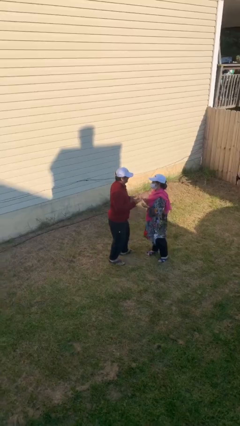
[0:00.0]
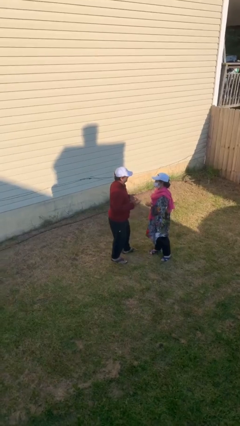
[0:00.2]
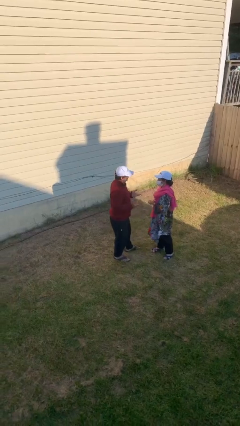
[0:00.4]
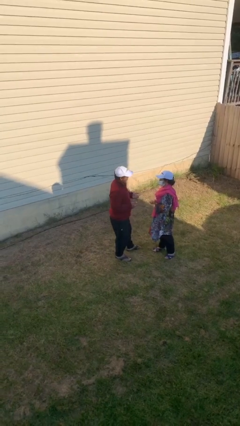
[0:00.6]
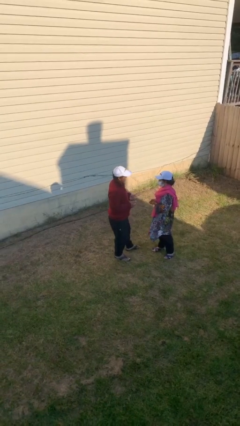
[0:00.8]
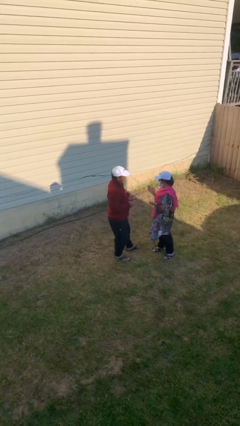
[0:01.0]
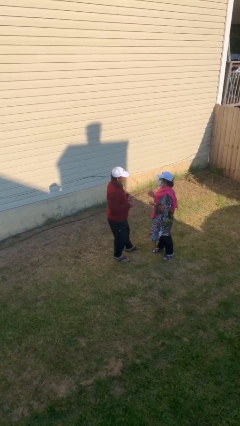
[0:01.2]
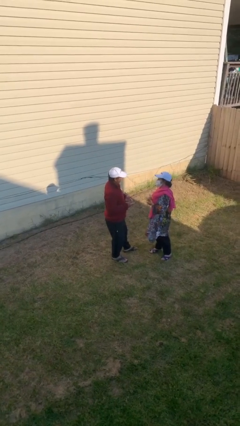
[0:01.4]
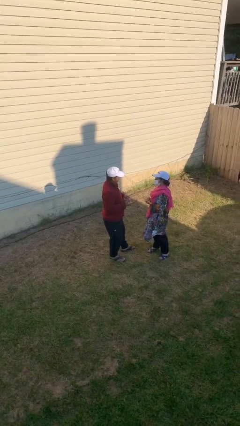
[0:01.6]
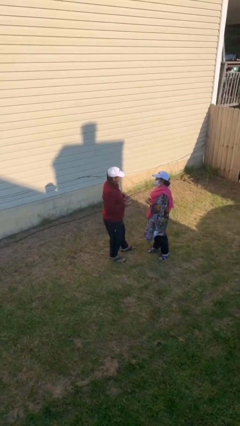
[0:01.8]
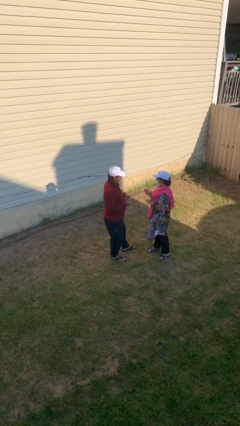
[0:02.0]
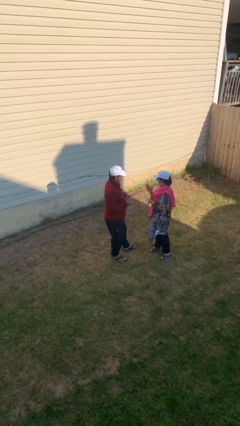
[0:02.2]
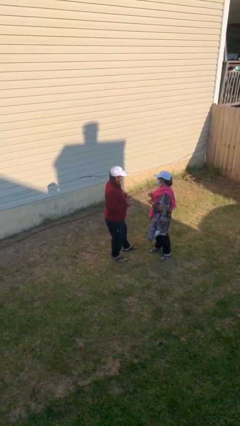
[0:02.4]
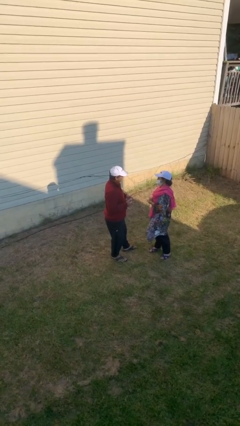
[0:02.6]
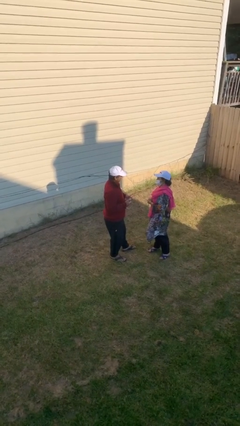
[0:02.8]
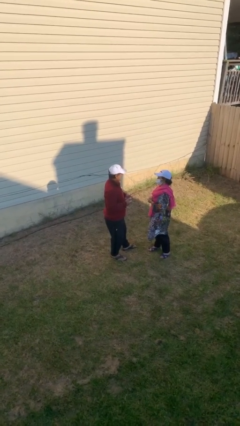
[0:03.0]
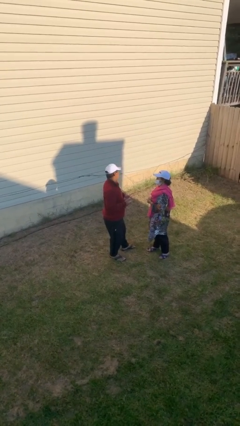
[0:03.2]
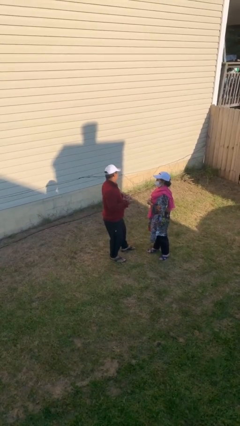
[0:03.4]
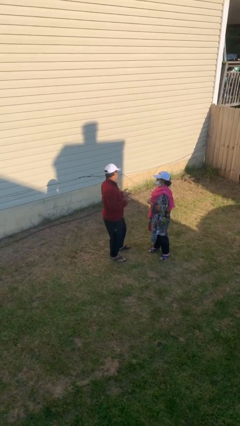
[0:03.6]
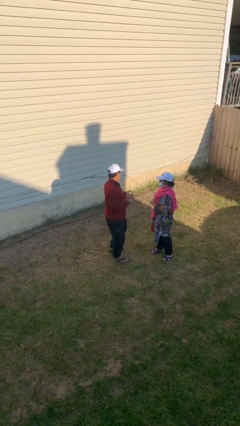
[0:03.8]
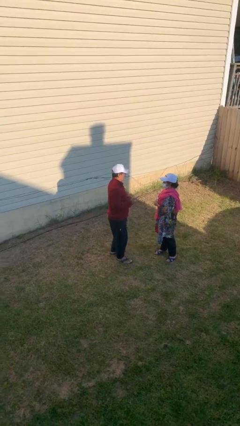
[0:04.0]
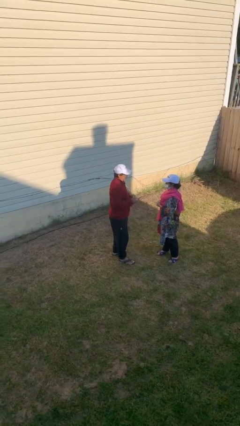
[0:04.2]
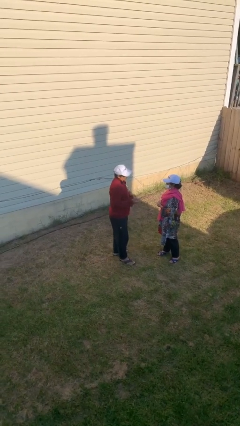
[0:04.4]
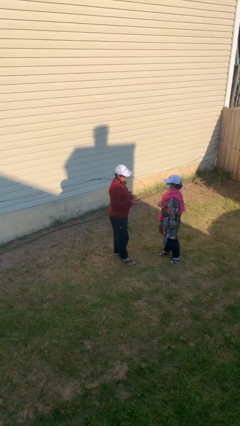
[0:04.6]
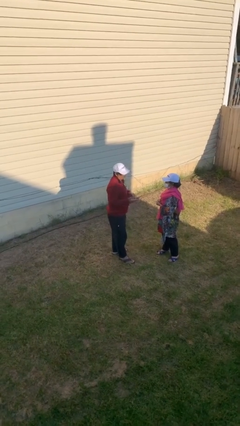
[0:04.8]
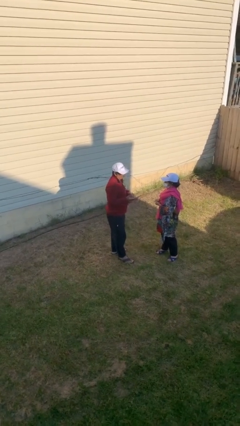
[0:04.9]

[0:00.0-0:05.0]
person talks to person

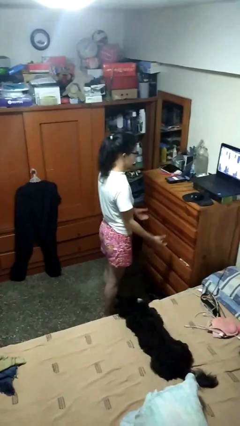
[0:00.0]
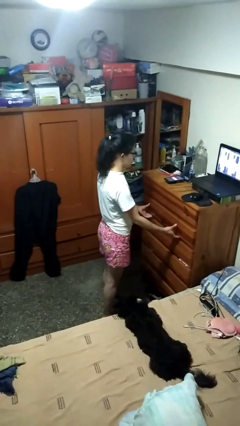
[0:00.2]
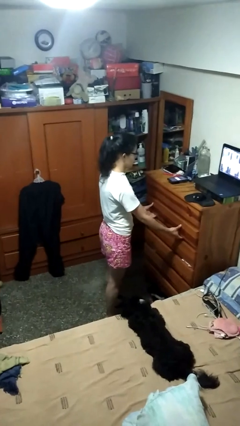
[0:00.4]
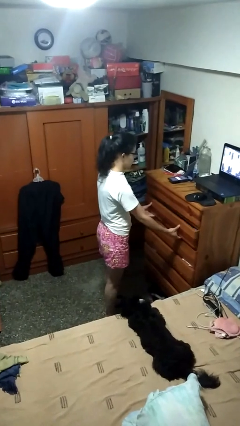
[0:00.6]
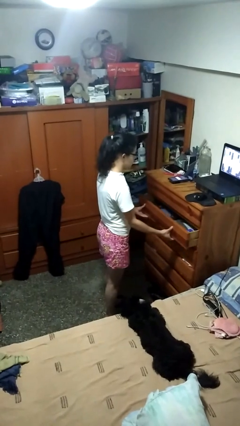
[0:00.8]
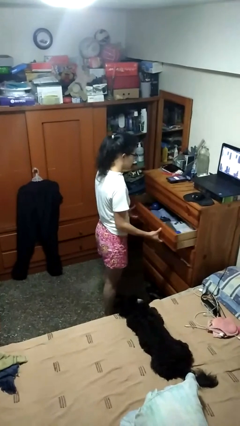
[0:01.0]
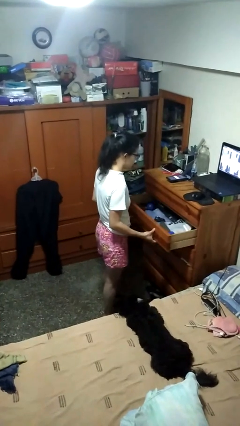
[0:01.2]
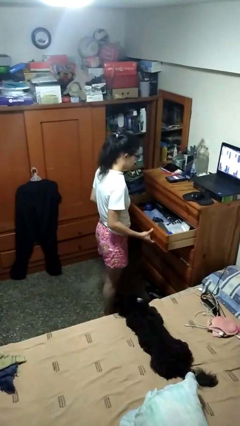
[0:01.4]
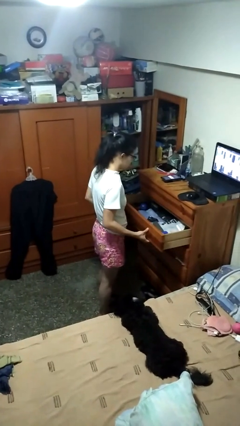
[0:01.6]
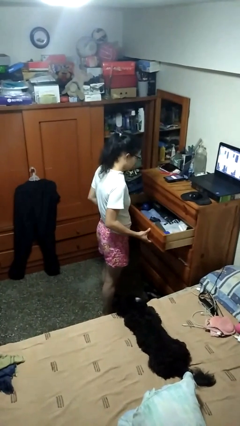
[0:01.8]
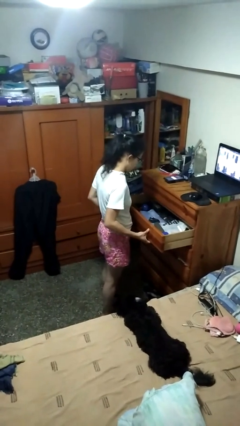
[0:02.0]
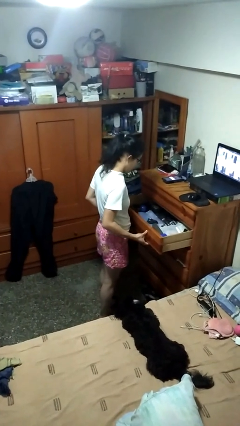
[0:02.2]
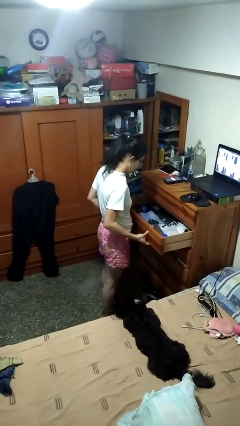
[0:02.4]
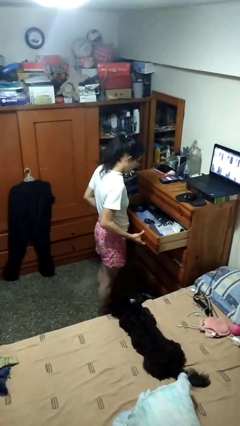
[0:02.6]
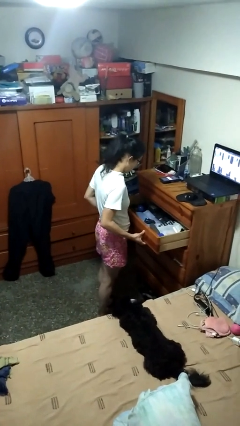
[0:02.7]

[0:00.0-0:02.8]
person opens dresser drawer

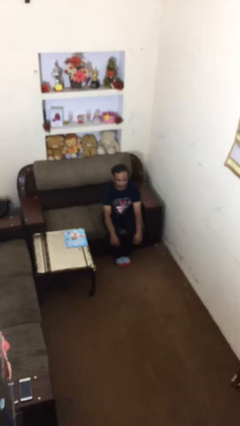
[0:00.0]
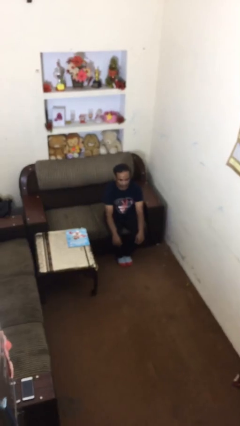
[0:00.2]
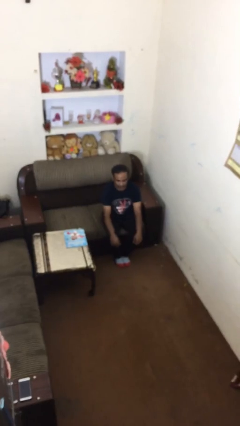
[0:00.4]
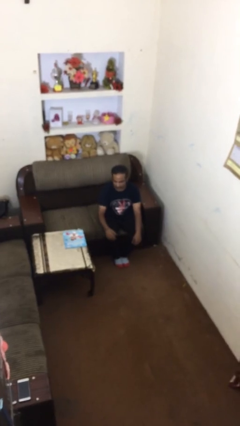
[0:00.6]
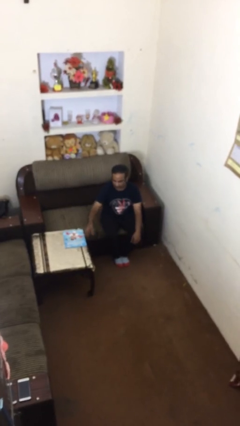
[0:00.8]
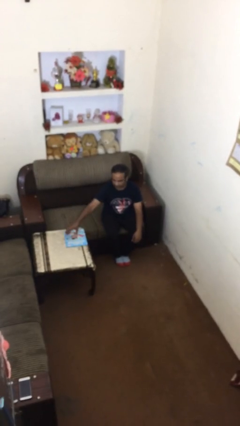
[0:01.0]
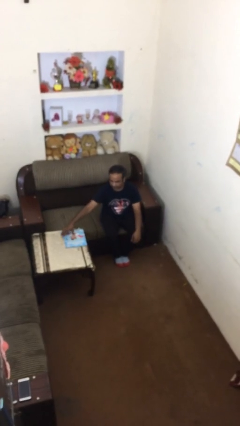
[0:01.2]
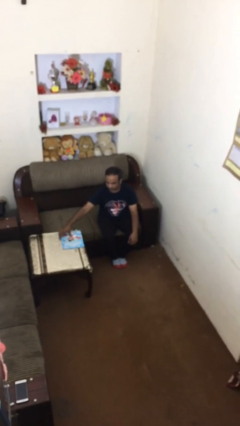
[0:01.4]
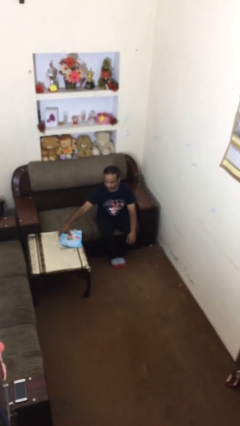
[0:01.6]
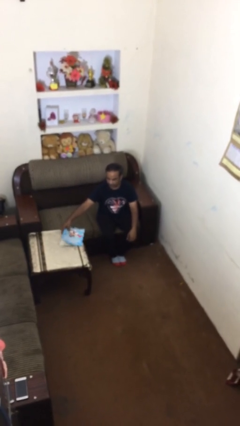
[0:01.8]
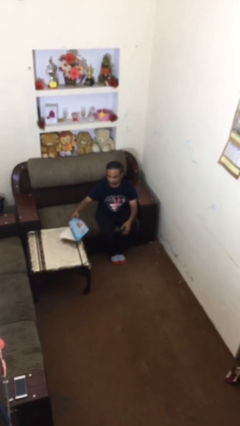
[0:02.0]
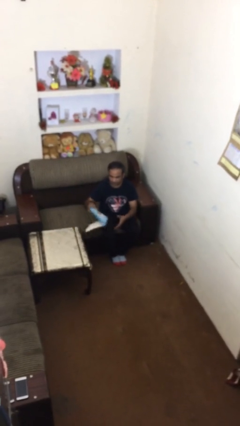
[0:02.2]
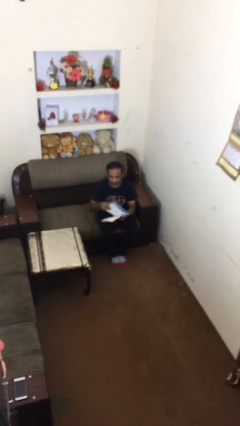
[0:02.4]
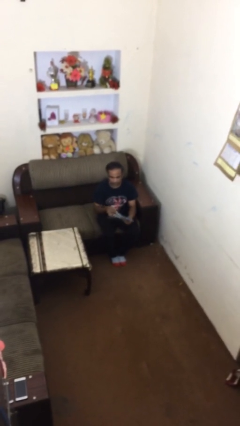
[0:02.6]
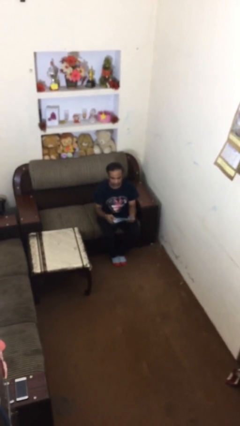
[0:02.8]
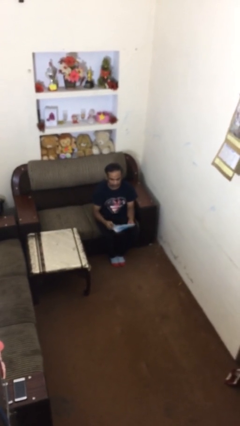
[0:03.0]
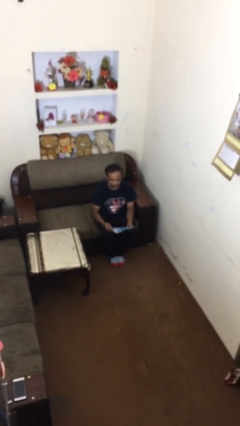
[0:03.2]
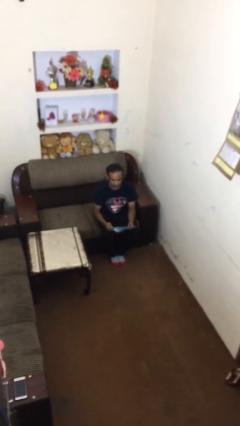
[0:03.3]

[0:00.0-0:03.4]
person picks up object from table

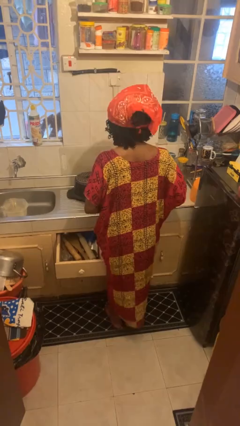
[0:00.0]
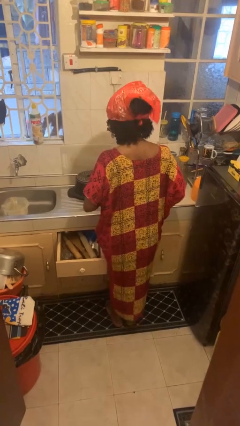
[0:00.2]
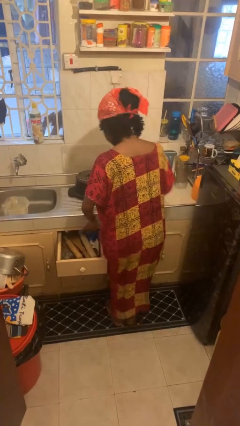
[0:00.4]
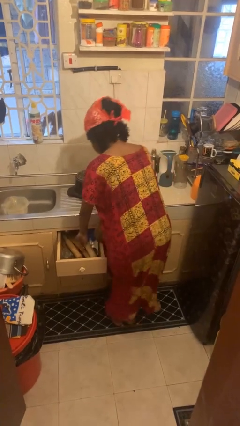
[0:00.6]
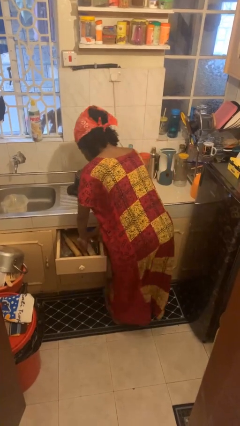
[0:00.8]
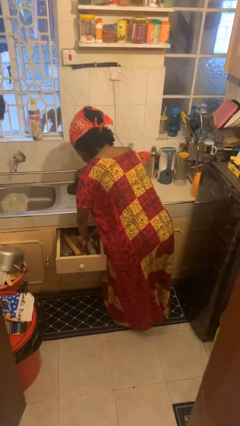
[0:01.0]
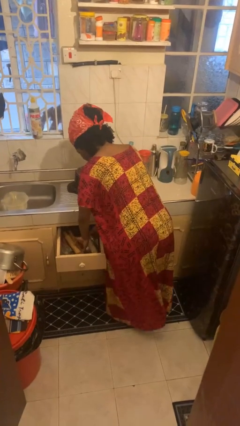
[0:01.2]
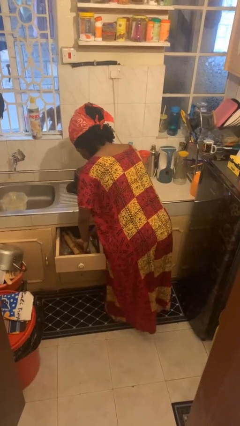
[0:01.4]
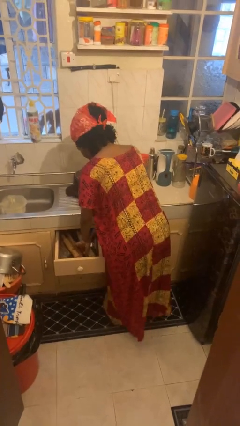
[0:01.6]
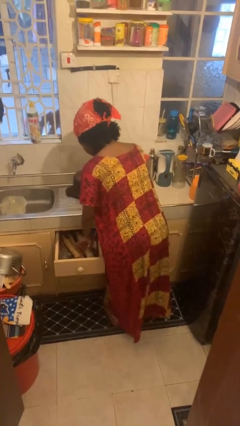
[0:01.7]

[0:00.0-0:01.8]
person searches in kitchen drawer

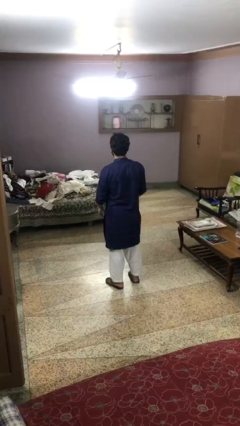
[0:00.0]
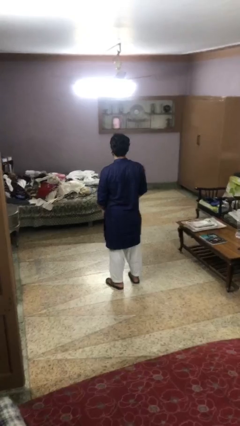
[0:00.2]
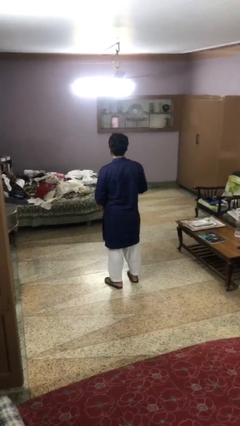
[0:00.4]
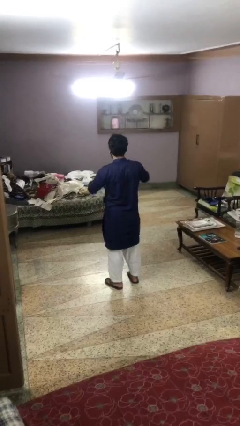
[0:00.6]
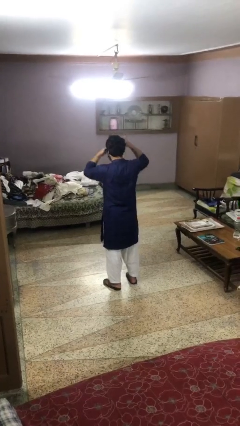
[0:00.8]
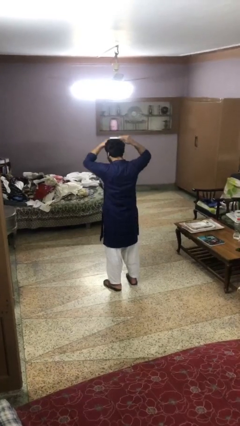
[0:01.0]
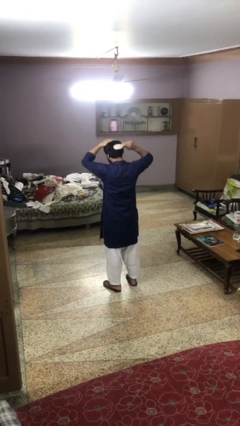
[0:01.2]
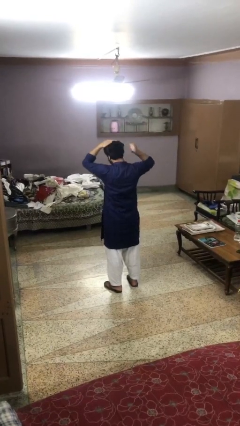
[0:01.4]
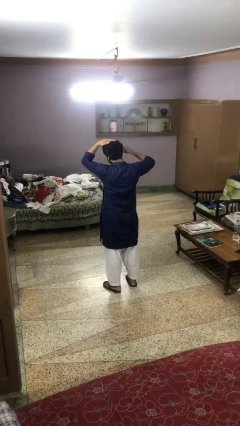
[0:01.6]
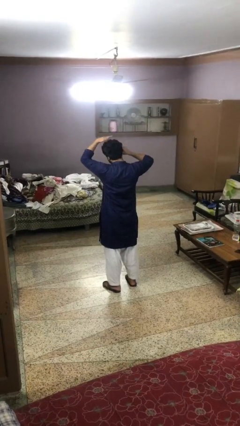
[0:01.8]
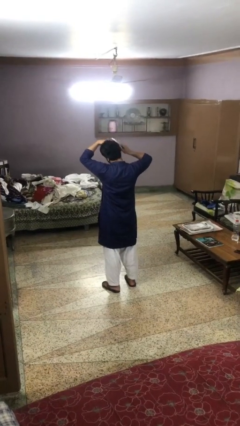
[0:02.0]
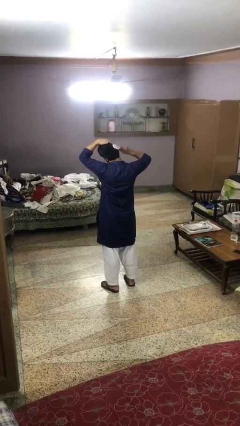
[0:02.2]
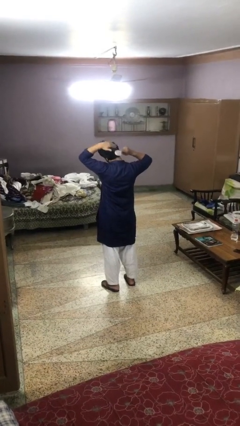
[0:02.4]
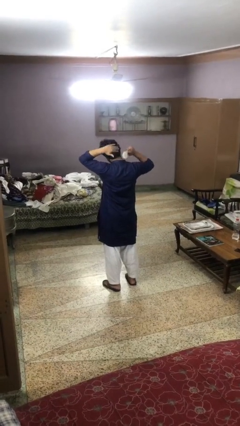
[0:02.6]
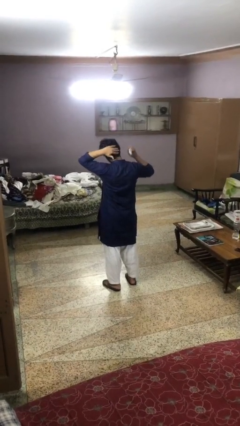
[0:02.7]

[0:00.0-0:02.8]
person brushes hair

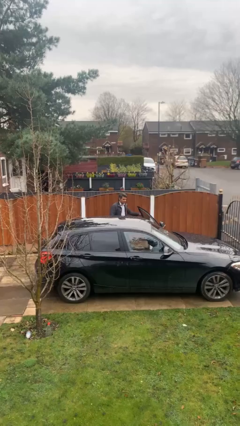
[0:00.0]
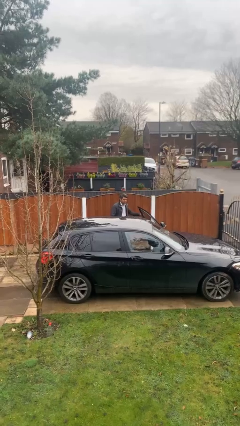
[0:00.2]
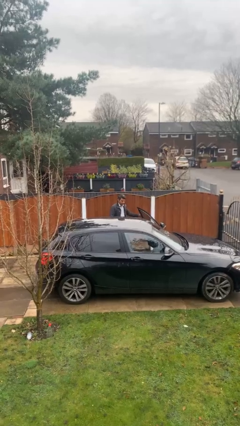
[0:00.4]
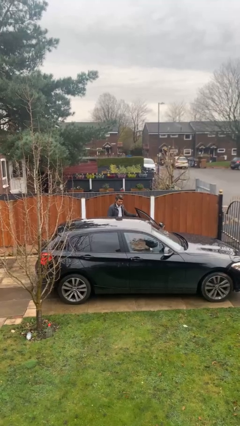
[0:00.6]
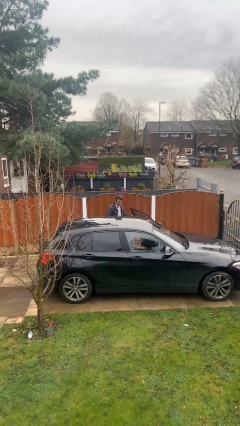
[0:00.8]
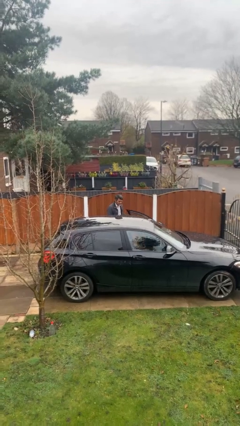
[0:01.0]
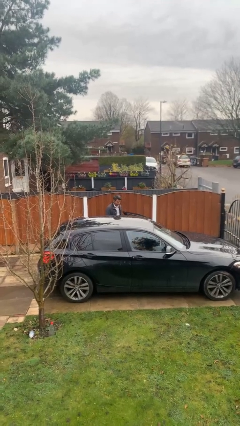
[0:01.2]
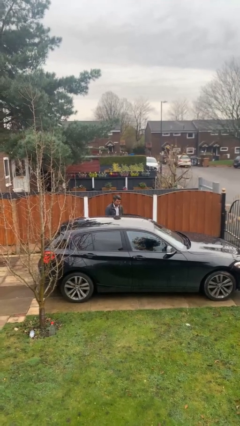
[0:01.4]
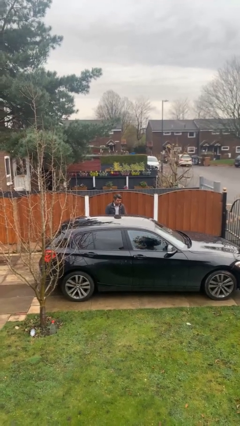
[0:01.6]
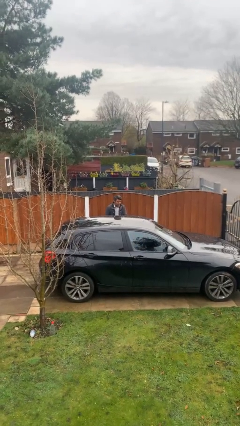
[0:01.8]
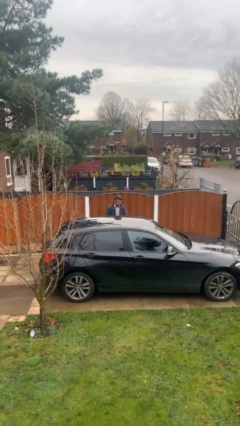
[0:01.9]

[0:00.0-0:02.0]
person closes car door
